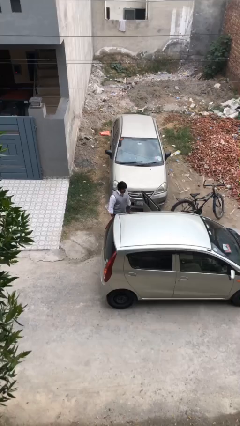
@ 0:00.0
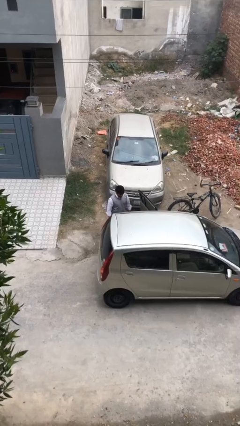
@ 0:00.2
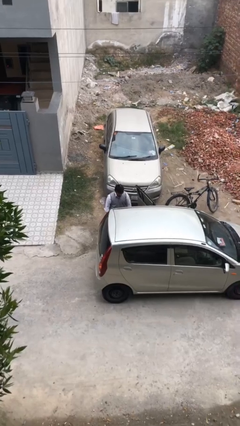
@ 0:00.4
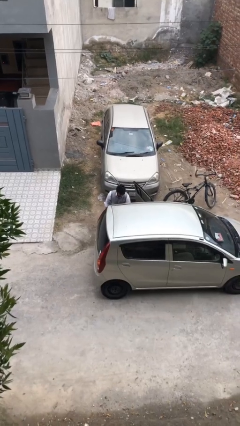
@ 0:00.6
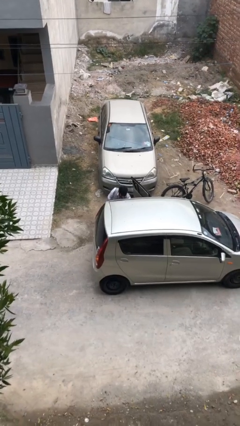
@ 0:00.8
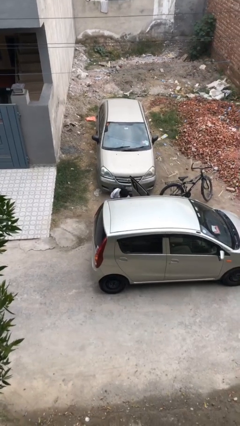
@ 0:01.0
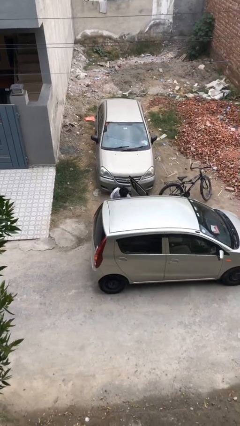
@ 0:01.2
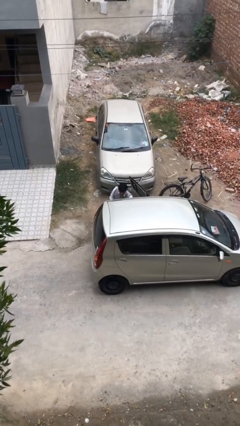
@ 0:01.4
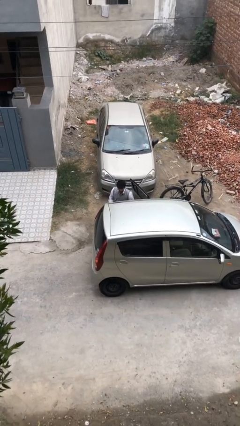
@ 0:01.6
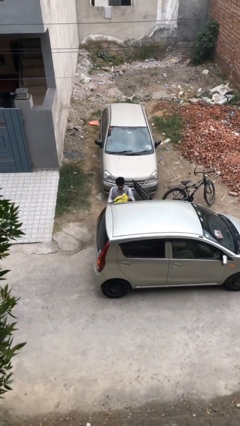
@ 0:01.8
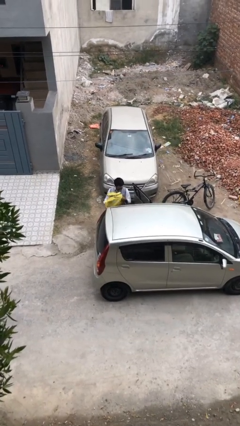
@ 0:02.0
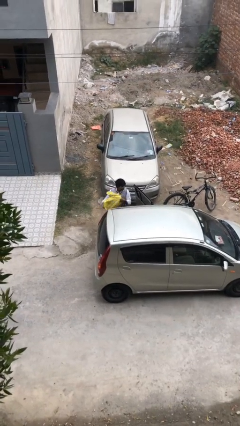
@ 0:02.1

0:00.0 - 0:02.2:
person unloads car

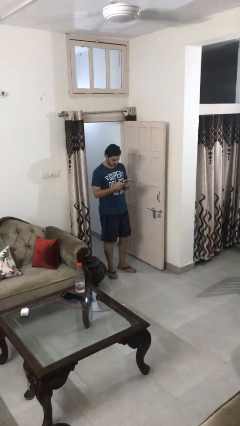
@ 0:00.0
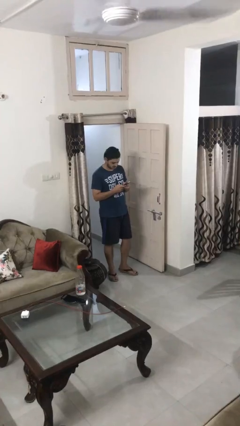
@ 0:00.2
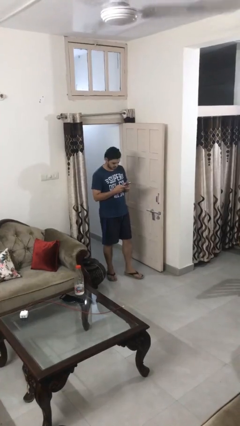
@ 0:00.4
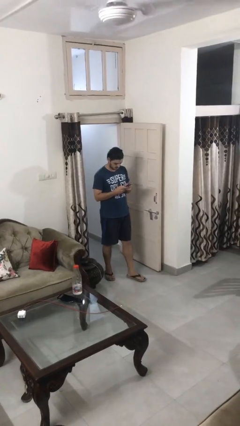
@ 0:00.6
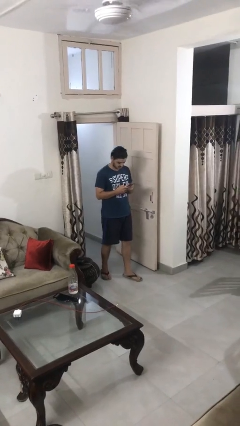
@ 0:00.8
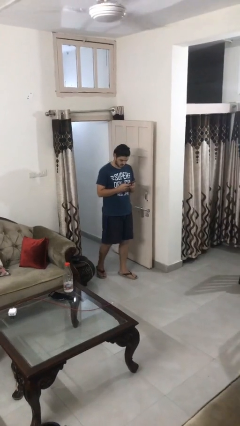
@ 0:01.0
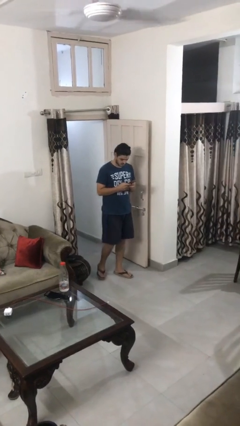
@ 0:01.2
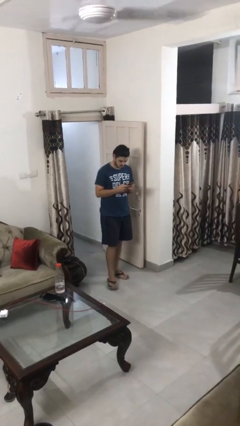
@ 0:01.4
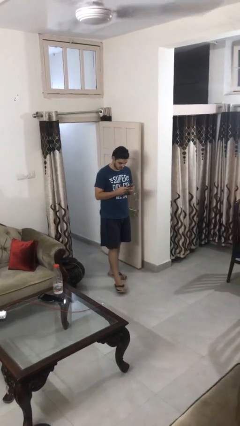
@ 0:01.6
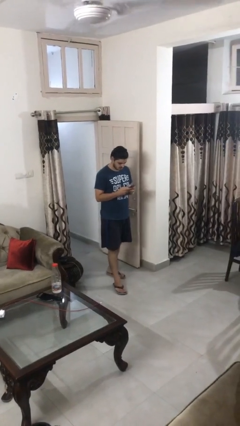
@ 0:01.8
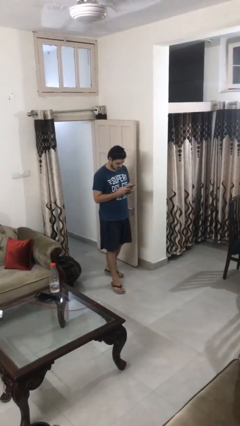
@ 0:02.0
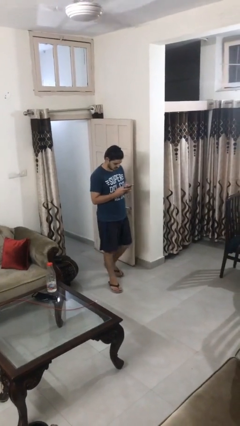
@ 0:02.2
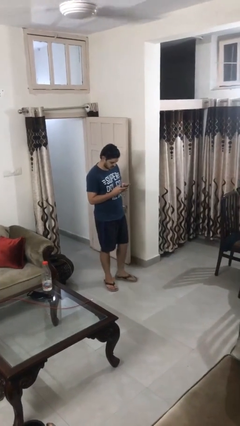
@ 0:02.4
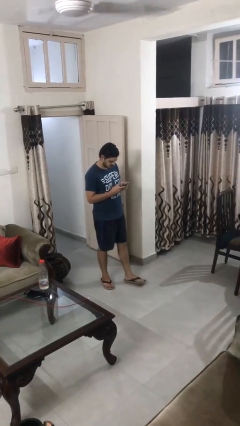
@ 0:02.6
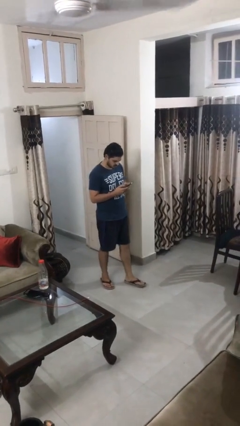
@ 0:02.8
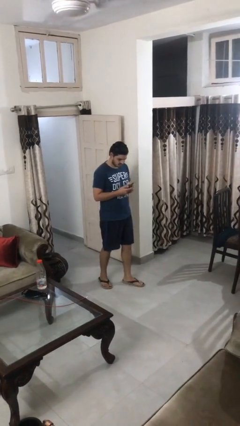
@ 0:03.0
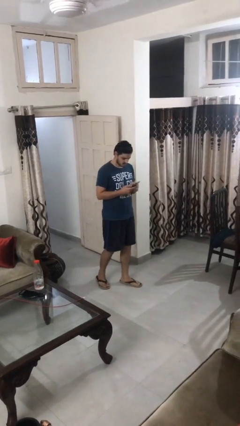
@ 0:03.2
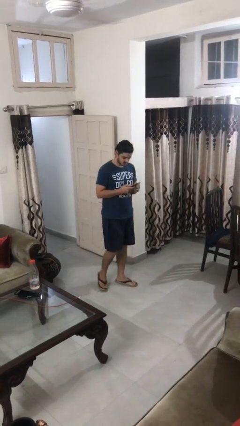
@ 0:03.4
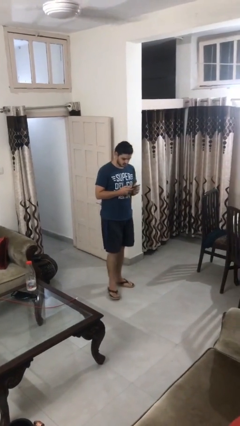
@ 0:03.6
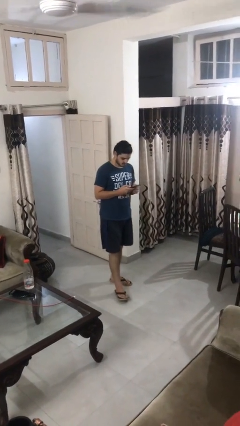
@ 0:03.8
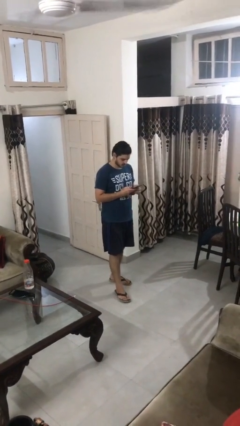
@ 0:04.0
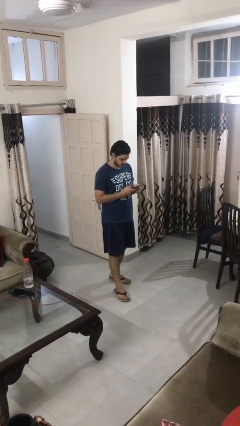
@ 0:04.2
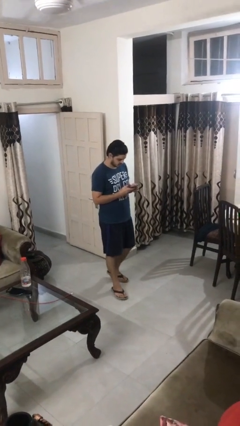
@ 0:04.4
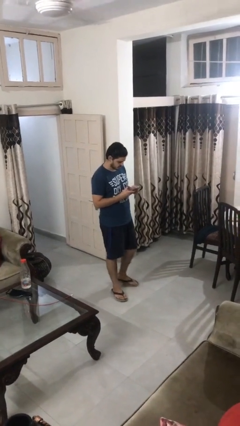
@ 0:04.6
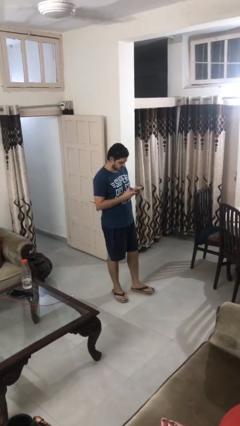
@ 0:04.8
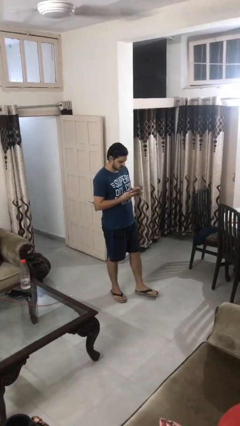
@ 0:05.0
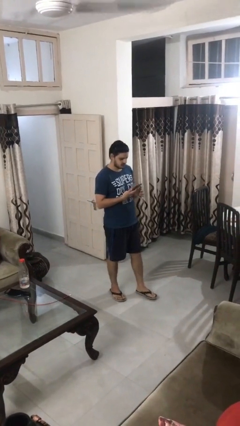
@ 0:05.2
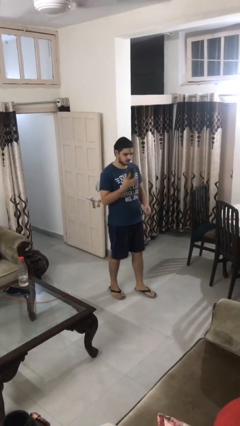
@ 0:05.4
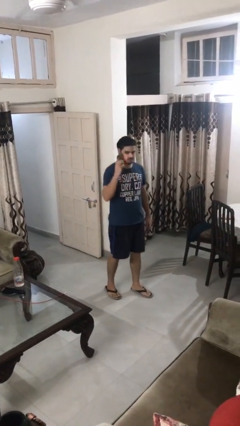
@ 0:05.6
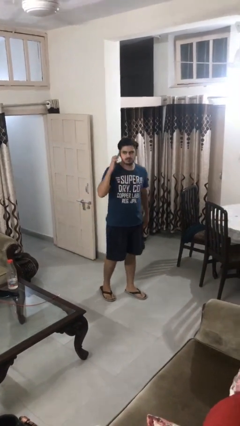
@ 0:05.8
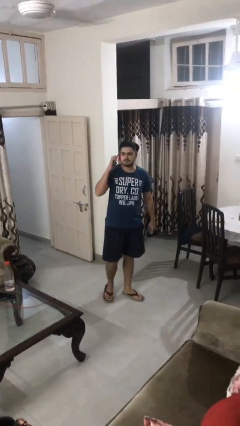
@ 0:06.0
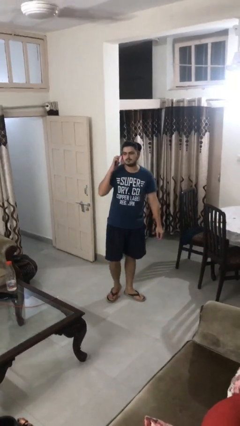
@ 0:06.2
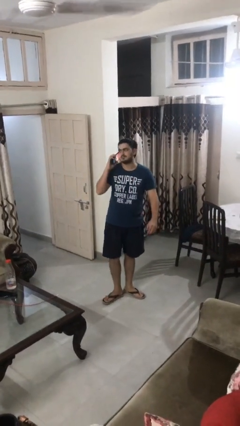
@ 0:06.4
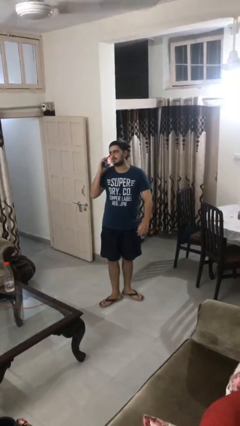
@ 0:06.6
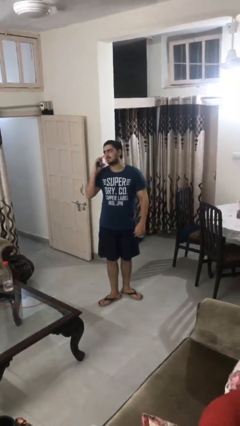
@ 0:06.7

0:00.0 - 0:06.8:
person texts on phone

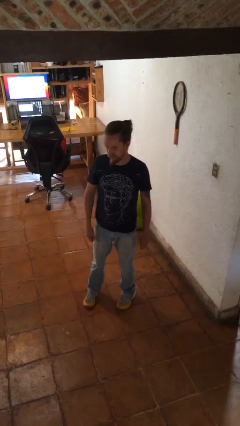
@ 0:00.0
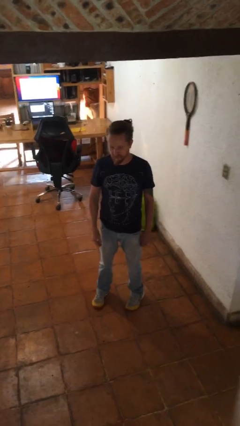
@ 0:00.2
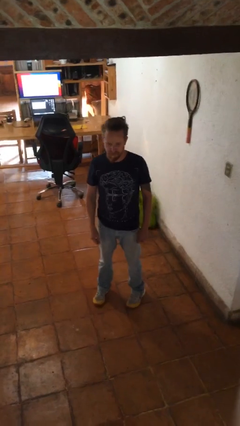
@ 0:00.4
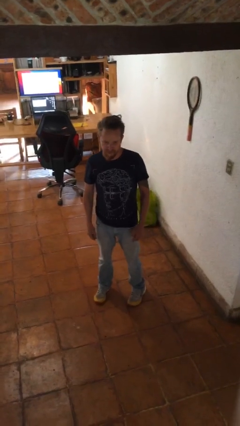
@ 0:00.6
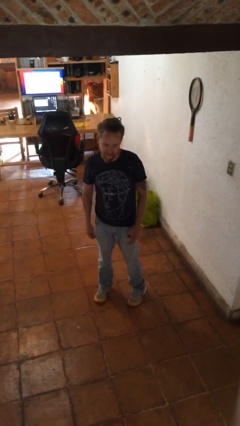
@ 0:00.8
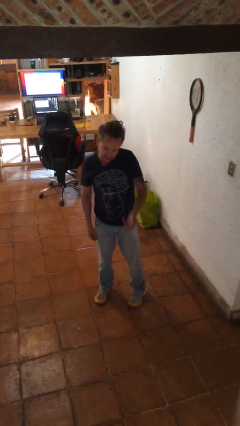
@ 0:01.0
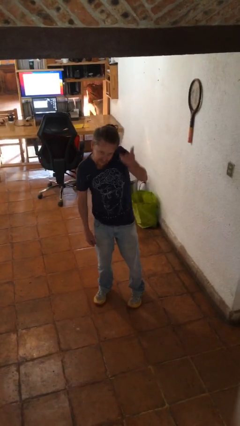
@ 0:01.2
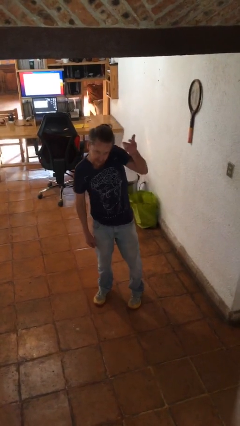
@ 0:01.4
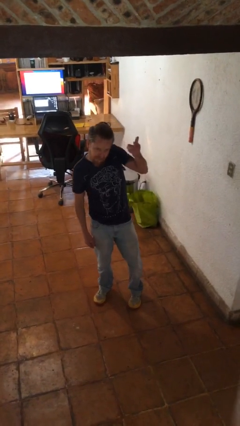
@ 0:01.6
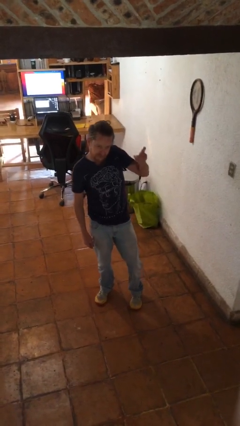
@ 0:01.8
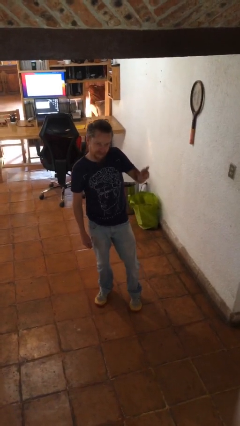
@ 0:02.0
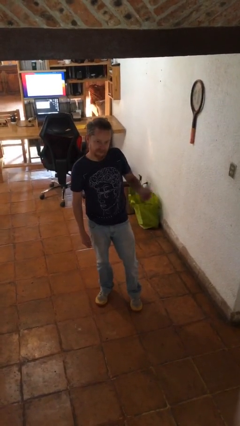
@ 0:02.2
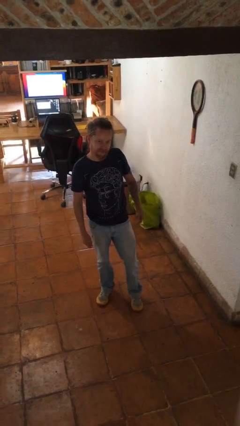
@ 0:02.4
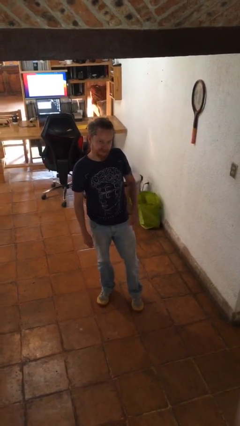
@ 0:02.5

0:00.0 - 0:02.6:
person gestures swipe up

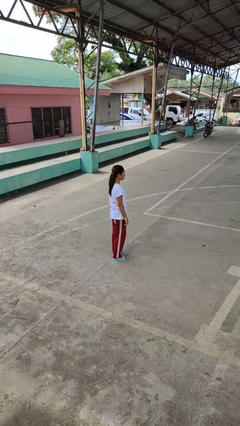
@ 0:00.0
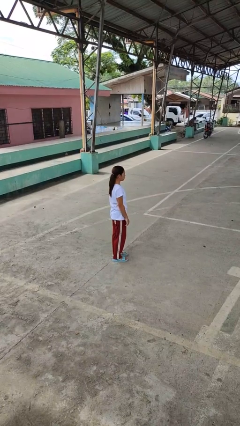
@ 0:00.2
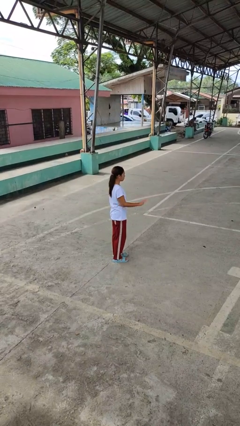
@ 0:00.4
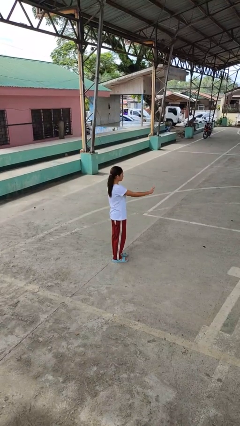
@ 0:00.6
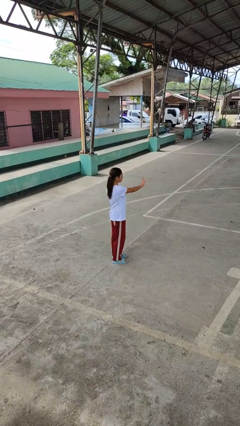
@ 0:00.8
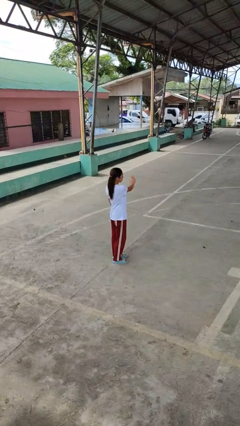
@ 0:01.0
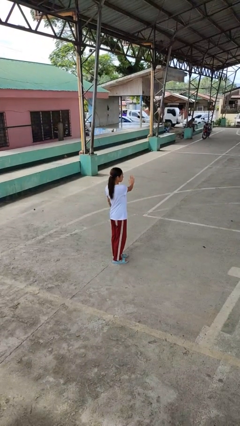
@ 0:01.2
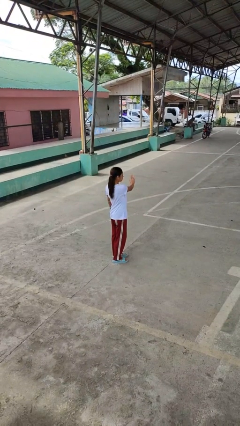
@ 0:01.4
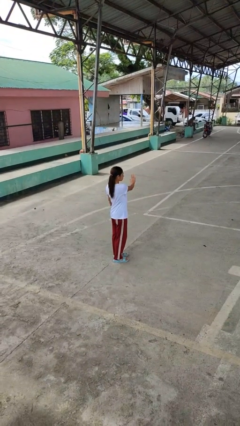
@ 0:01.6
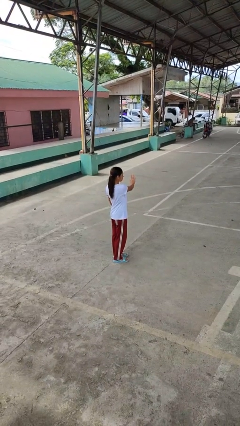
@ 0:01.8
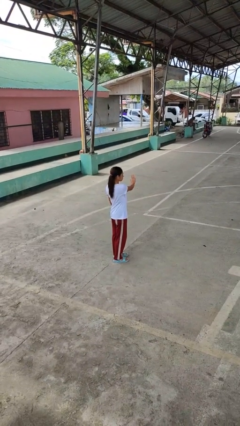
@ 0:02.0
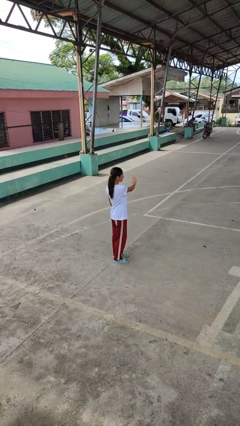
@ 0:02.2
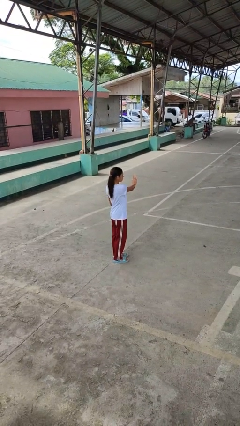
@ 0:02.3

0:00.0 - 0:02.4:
person gestures swipe left

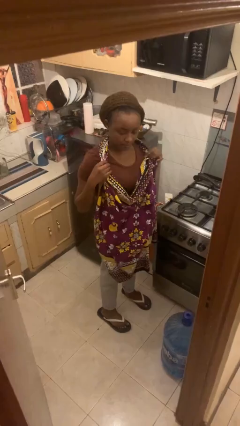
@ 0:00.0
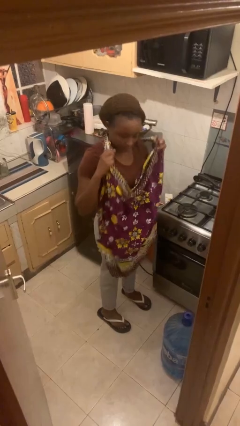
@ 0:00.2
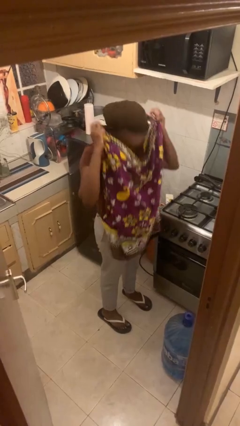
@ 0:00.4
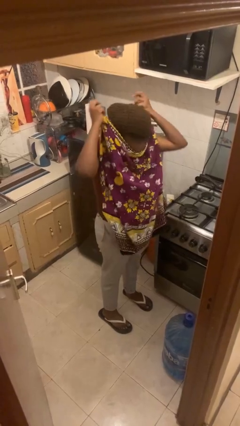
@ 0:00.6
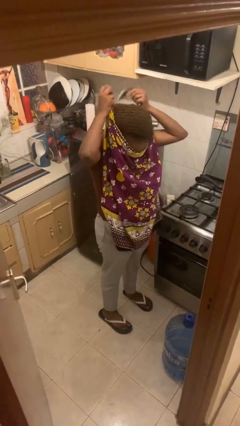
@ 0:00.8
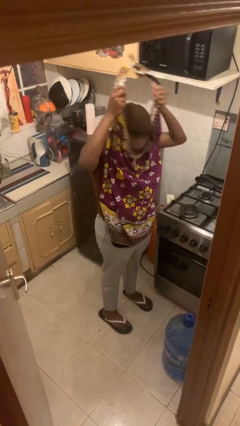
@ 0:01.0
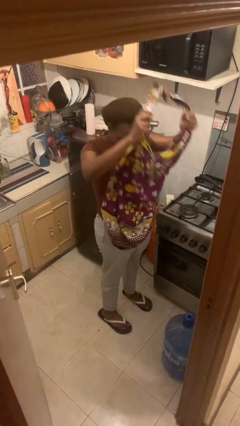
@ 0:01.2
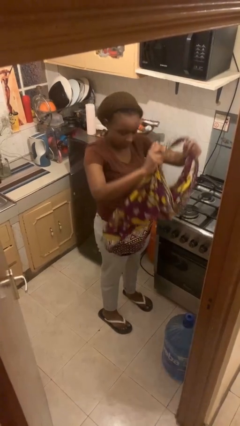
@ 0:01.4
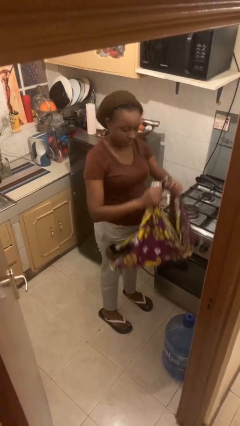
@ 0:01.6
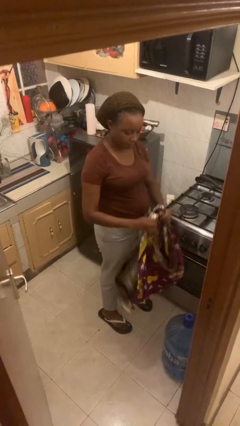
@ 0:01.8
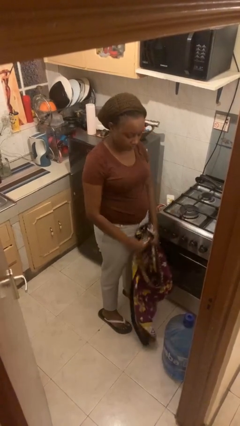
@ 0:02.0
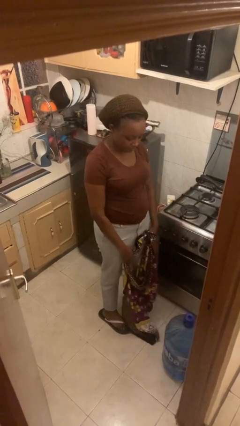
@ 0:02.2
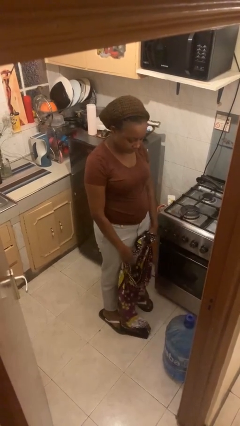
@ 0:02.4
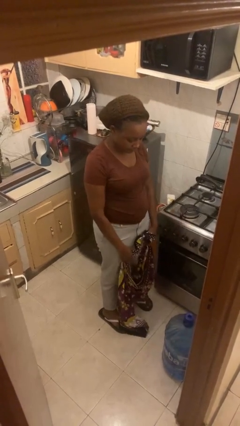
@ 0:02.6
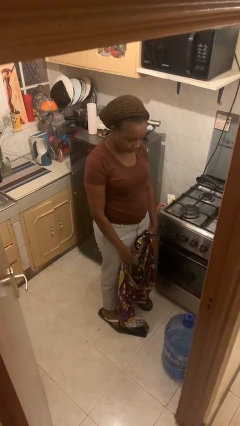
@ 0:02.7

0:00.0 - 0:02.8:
person takes off apron

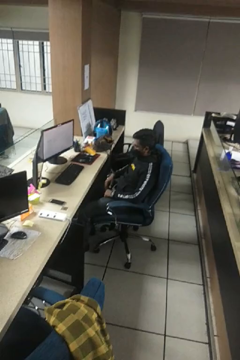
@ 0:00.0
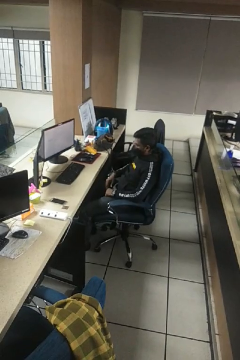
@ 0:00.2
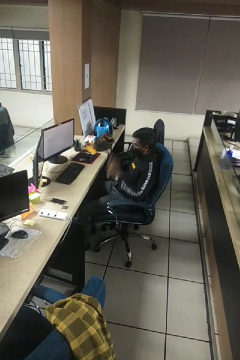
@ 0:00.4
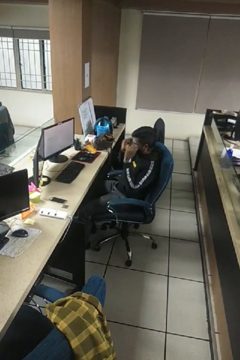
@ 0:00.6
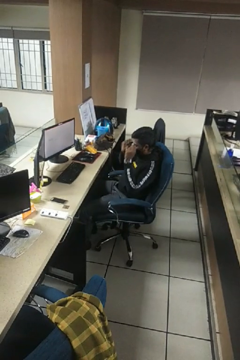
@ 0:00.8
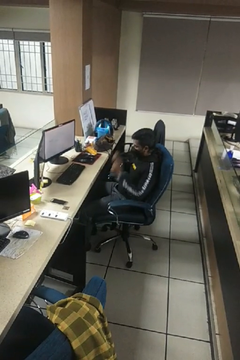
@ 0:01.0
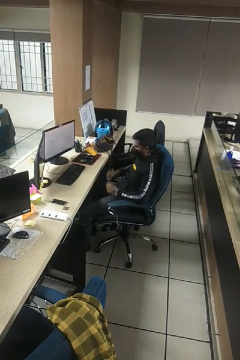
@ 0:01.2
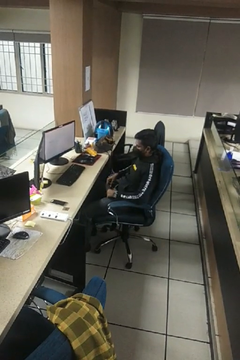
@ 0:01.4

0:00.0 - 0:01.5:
person takes off glasses
